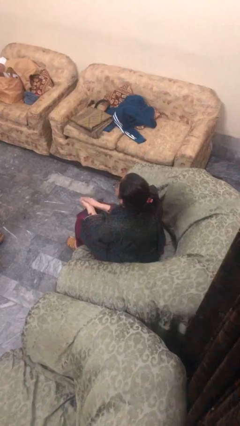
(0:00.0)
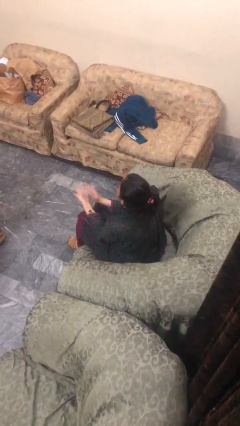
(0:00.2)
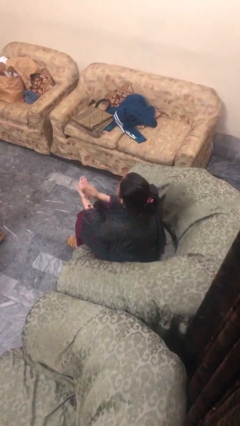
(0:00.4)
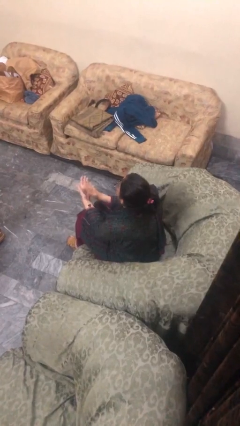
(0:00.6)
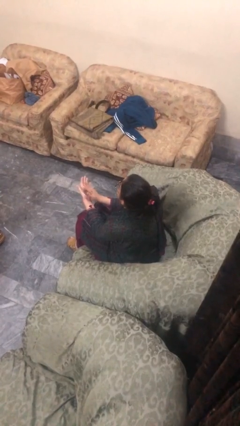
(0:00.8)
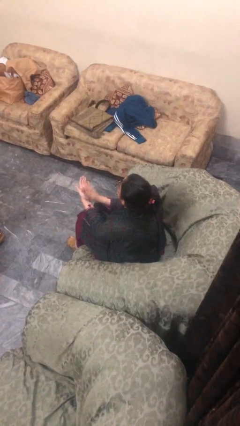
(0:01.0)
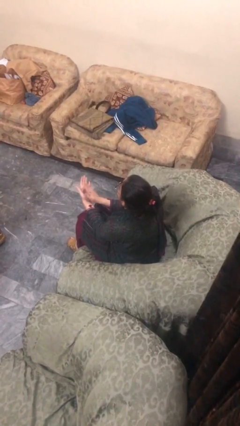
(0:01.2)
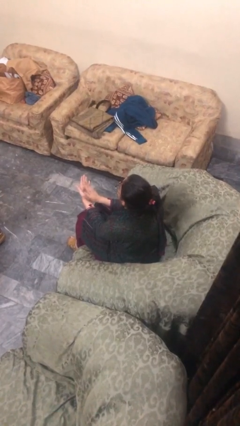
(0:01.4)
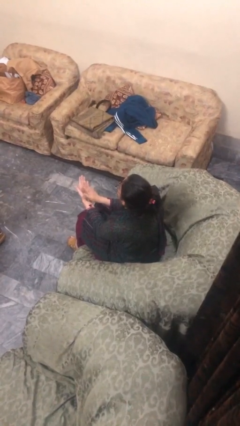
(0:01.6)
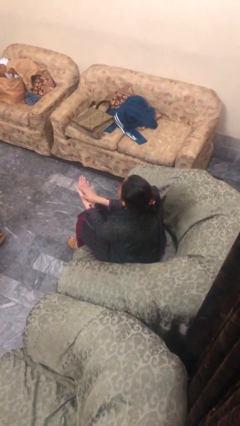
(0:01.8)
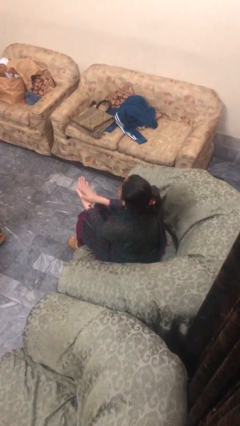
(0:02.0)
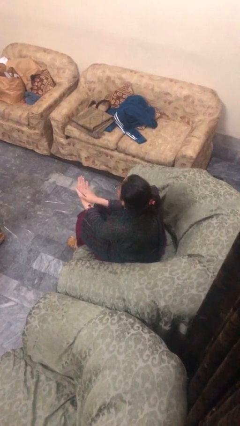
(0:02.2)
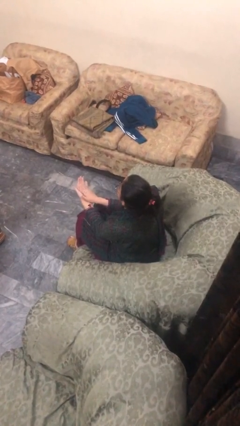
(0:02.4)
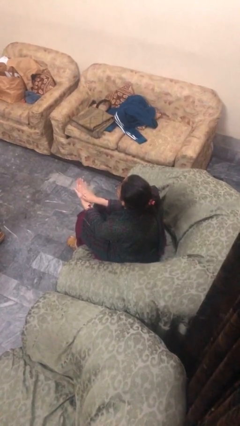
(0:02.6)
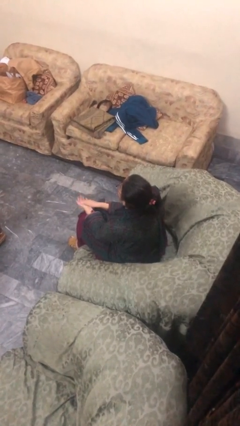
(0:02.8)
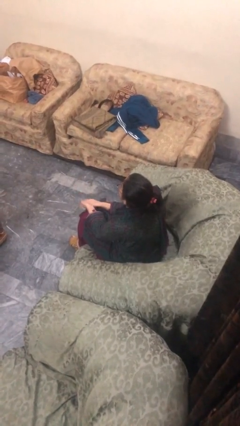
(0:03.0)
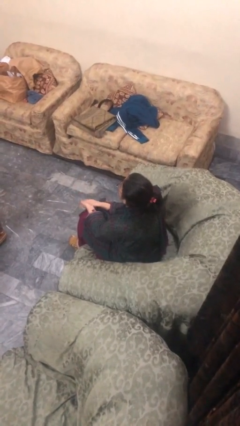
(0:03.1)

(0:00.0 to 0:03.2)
person claps hands

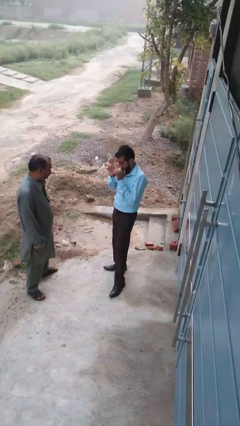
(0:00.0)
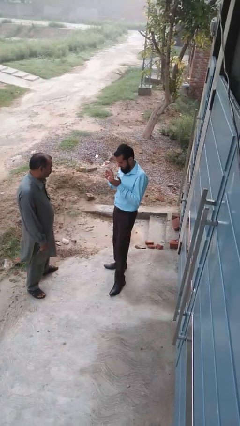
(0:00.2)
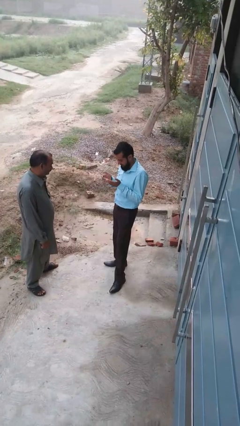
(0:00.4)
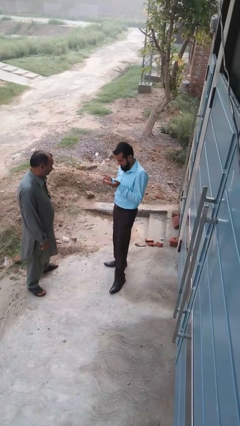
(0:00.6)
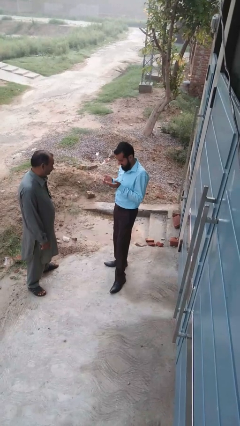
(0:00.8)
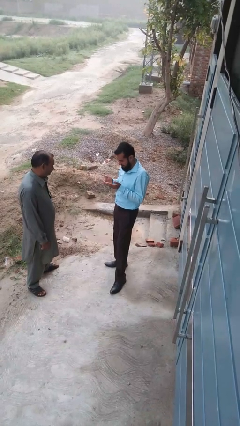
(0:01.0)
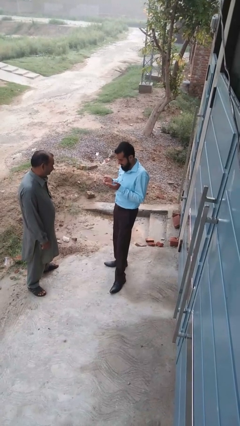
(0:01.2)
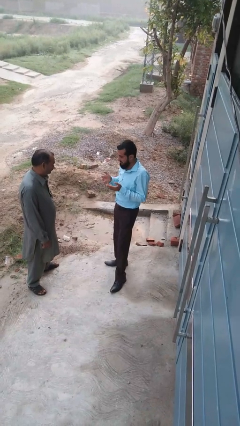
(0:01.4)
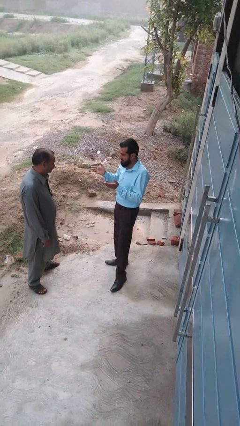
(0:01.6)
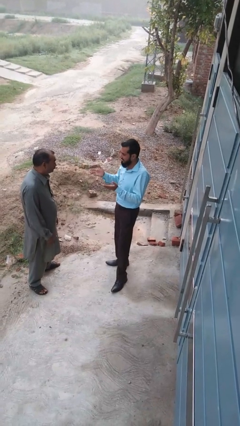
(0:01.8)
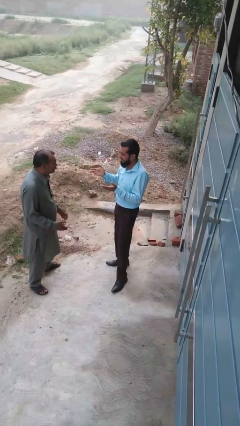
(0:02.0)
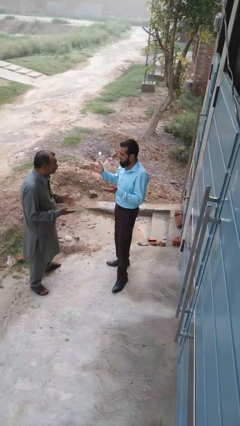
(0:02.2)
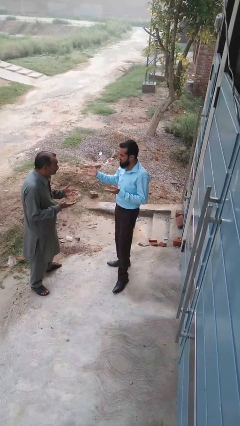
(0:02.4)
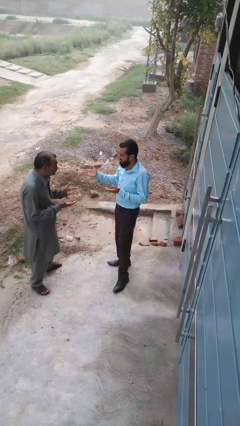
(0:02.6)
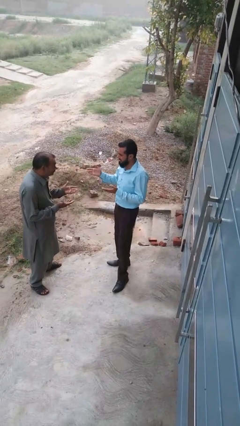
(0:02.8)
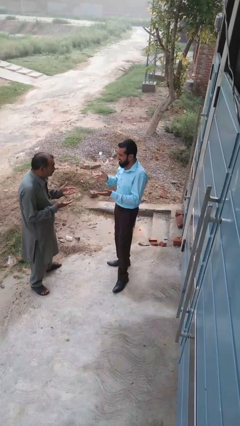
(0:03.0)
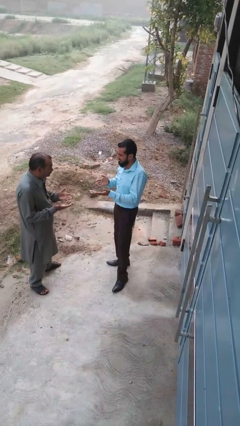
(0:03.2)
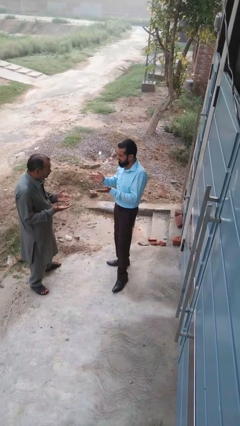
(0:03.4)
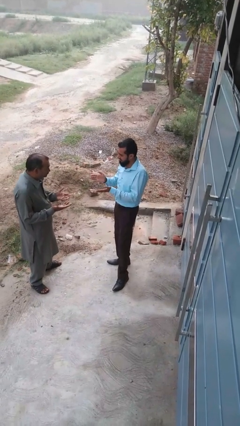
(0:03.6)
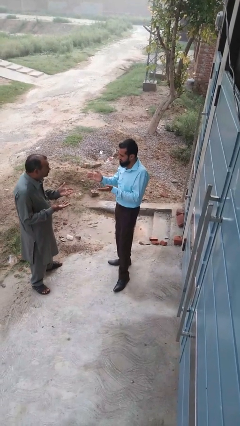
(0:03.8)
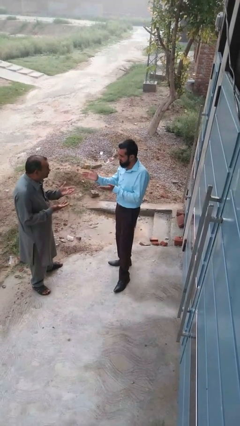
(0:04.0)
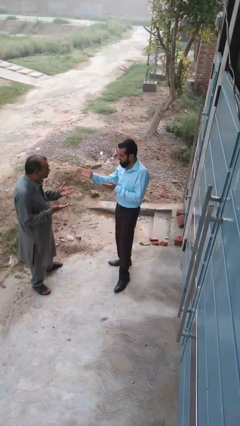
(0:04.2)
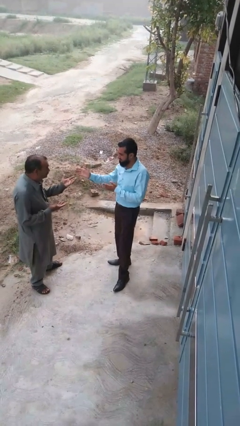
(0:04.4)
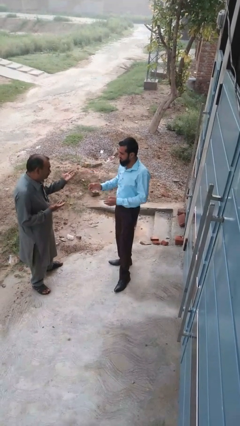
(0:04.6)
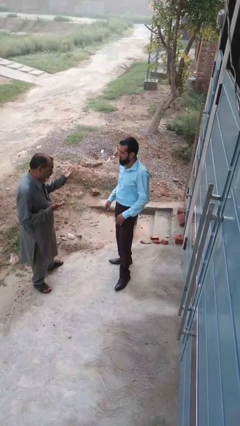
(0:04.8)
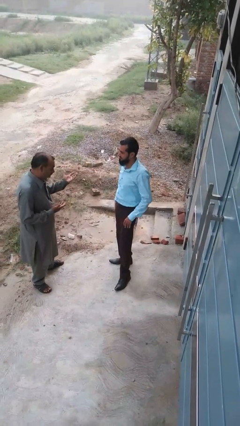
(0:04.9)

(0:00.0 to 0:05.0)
person talks to person

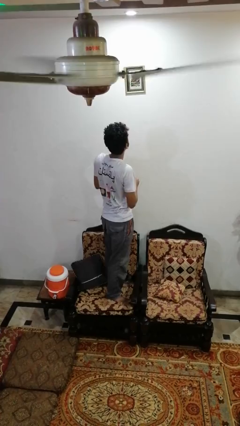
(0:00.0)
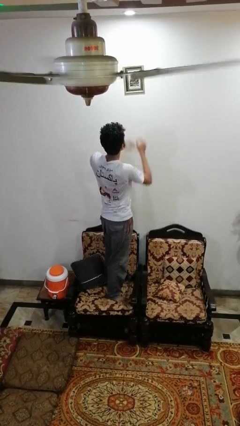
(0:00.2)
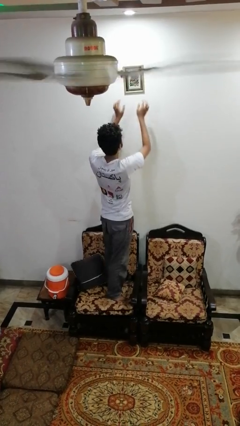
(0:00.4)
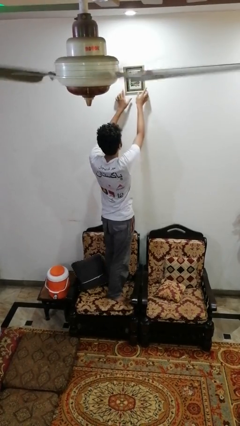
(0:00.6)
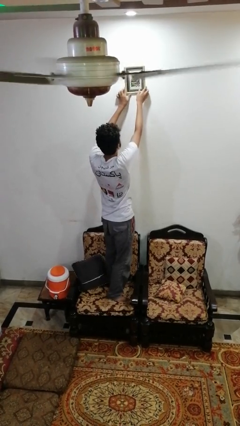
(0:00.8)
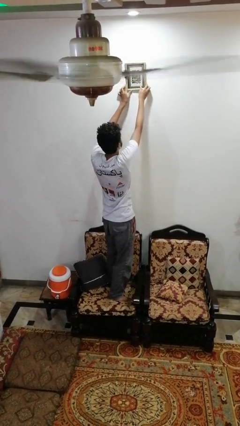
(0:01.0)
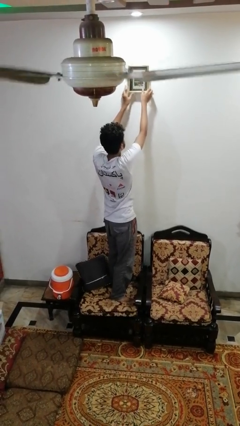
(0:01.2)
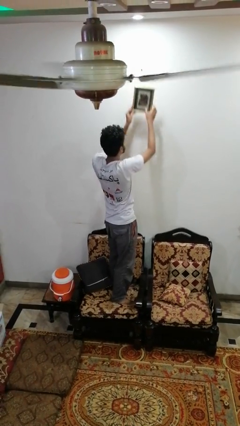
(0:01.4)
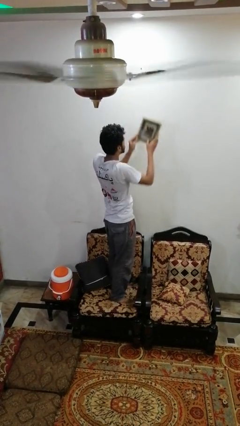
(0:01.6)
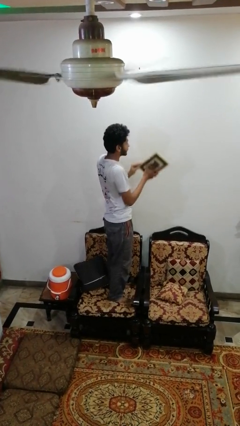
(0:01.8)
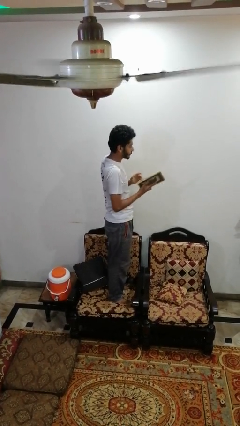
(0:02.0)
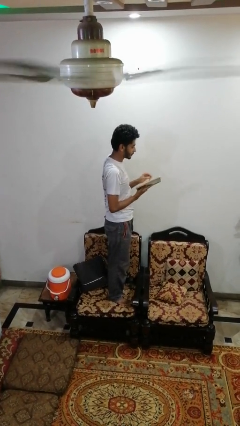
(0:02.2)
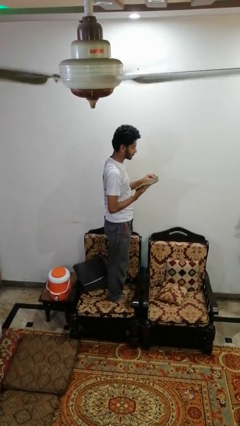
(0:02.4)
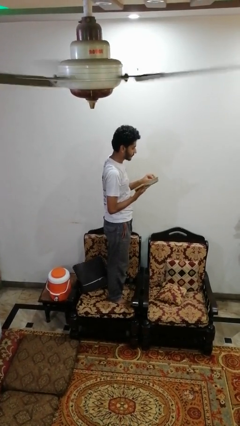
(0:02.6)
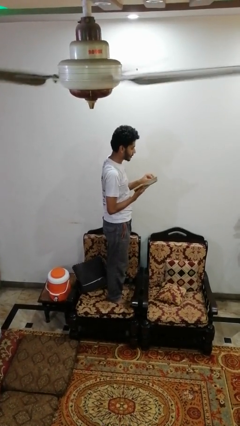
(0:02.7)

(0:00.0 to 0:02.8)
person takes down picture frame

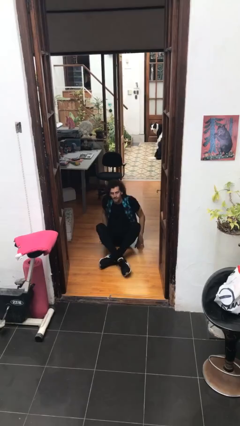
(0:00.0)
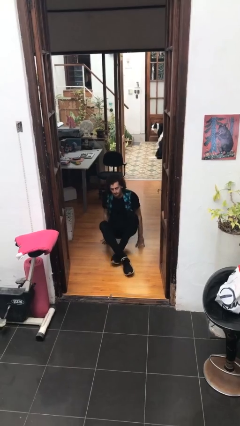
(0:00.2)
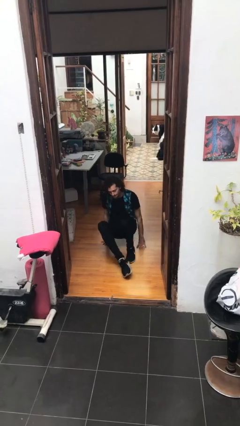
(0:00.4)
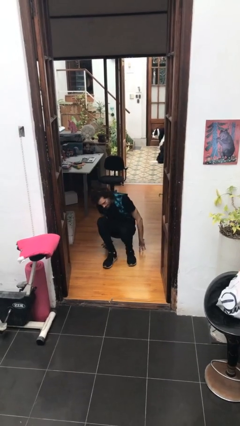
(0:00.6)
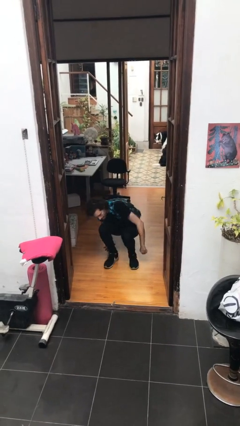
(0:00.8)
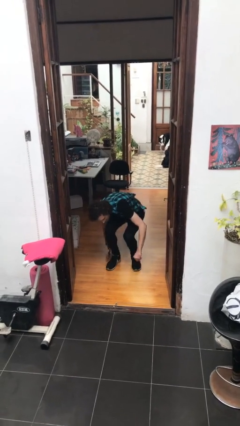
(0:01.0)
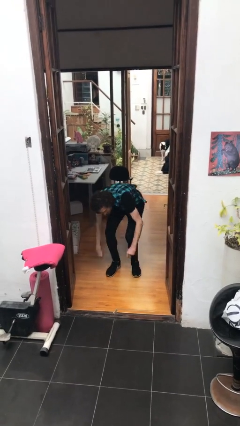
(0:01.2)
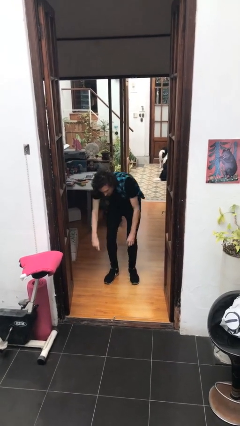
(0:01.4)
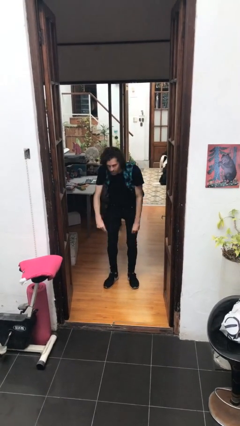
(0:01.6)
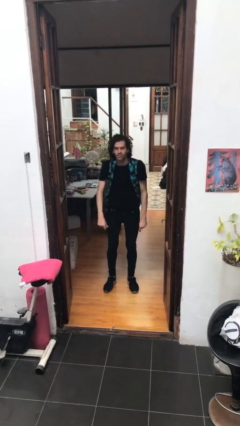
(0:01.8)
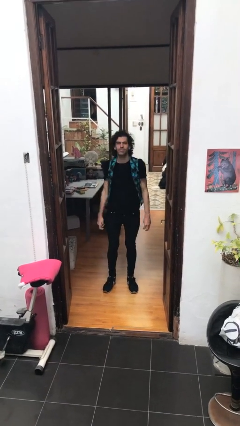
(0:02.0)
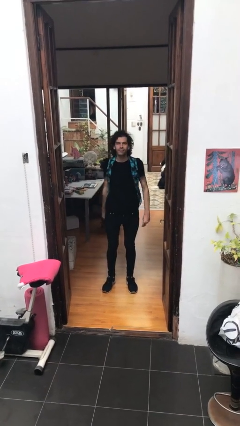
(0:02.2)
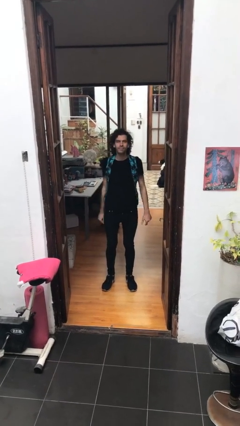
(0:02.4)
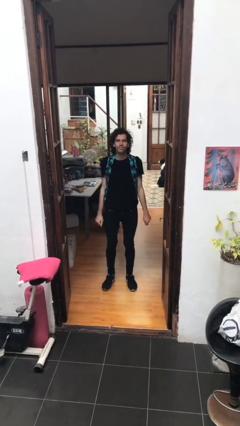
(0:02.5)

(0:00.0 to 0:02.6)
person stands up

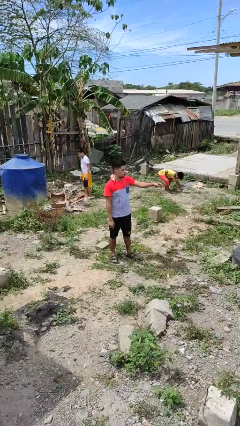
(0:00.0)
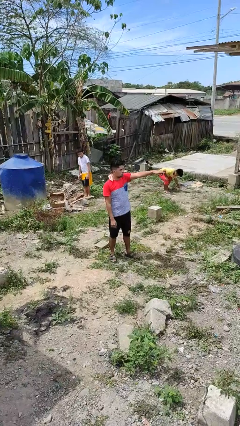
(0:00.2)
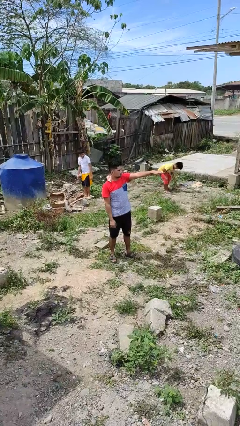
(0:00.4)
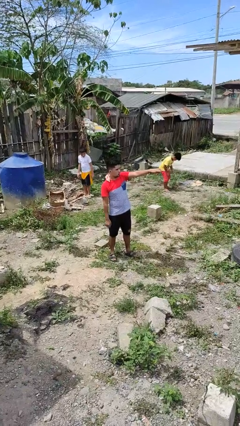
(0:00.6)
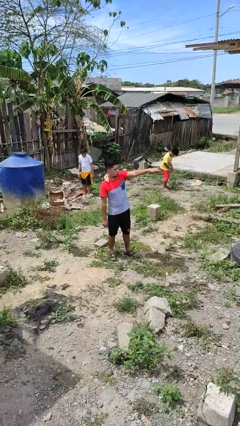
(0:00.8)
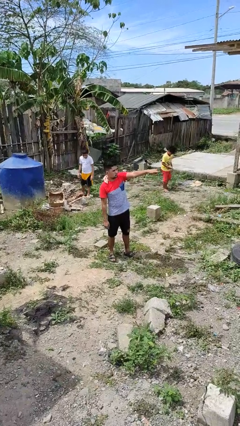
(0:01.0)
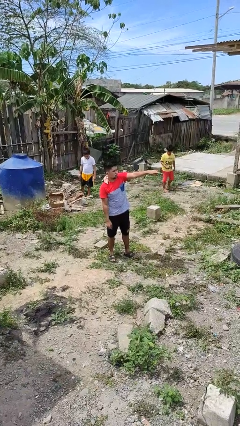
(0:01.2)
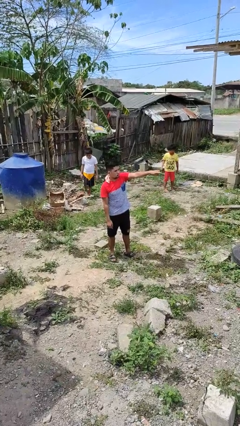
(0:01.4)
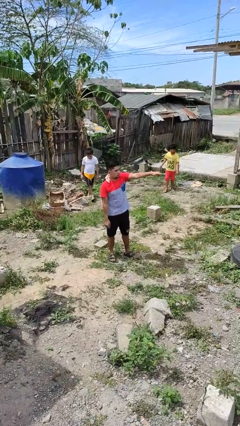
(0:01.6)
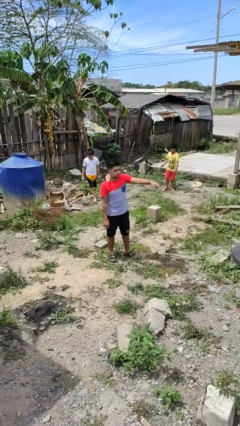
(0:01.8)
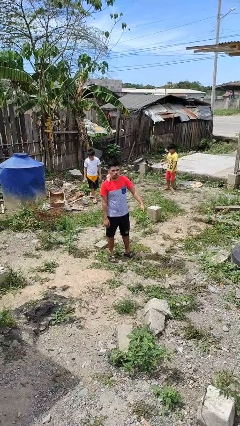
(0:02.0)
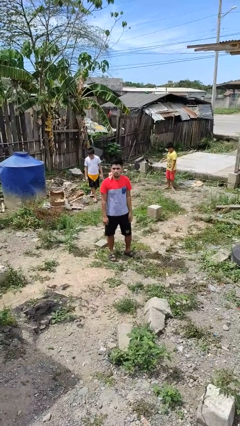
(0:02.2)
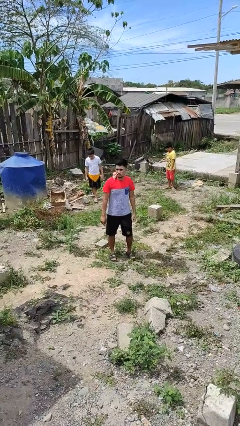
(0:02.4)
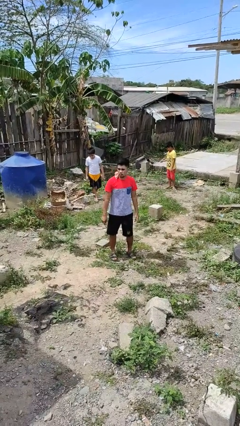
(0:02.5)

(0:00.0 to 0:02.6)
person points at person

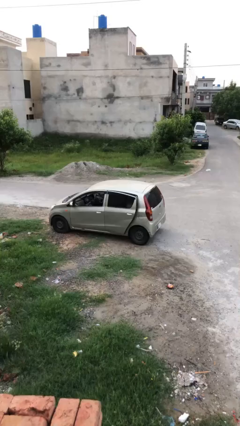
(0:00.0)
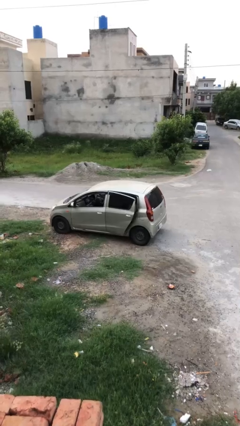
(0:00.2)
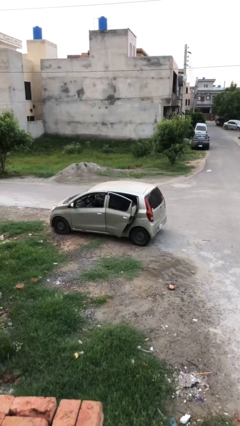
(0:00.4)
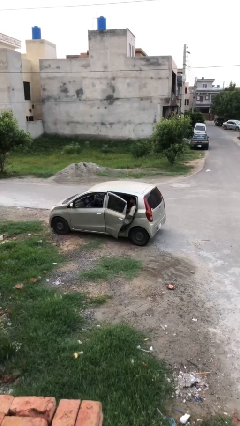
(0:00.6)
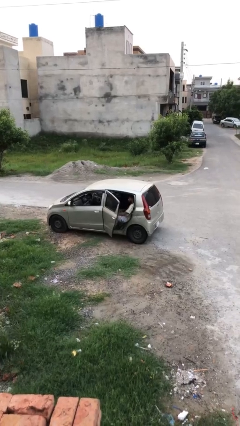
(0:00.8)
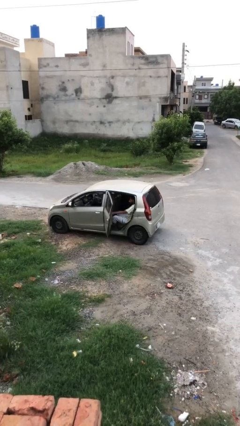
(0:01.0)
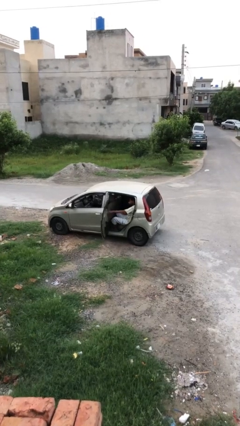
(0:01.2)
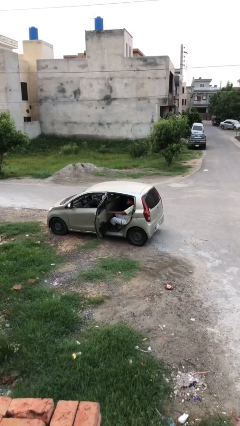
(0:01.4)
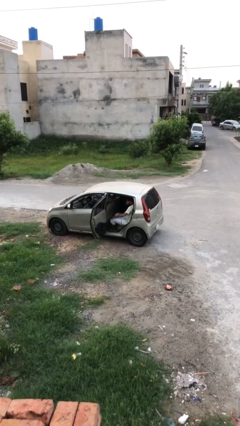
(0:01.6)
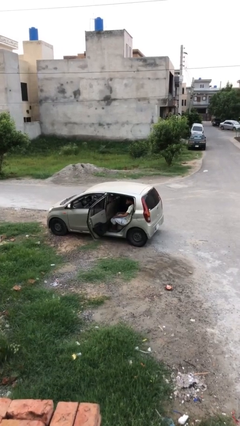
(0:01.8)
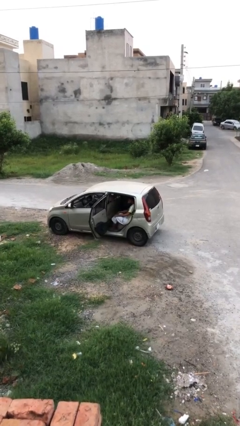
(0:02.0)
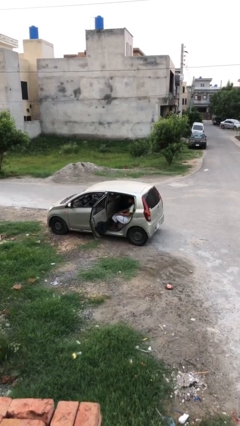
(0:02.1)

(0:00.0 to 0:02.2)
person opens car door
